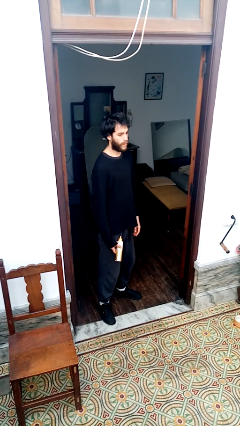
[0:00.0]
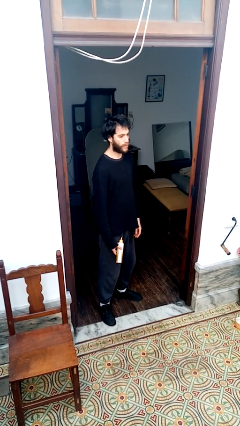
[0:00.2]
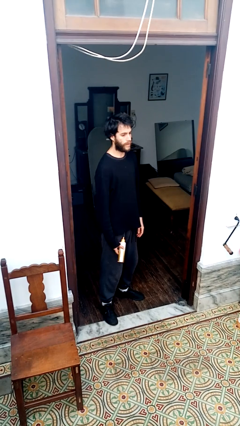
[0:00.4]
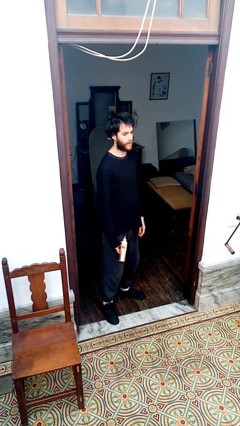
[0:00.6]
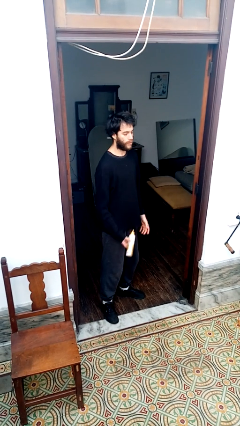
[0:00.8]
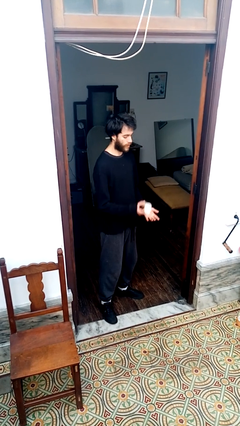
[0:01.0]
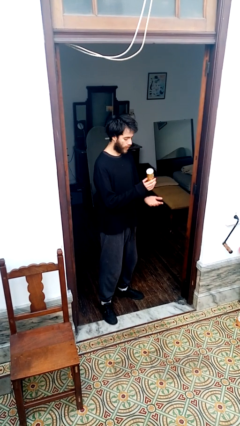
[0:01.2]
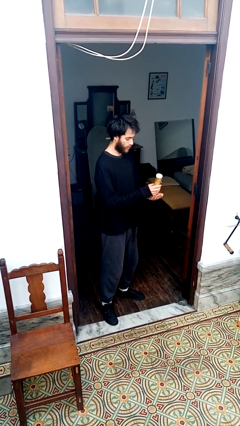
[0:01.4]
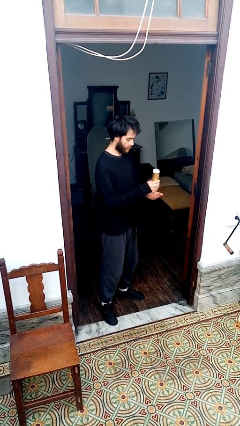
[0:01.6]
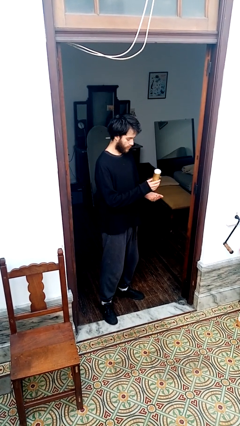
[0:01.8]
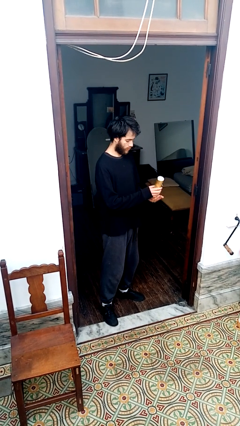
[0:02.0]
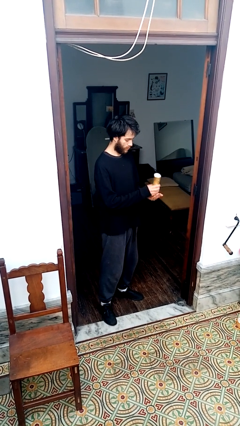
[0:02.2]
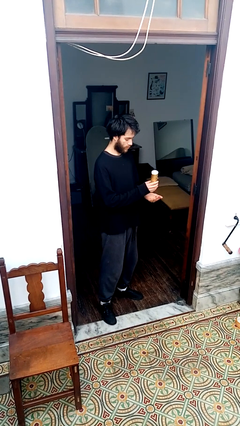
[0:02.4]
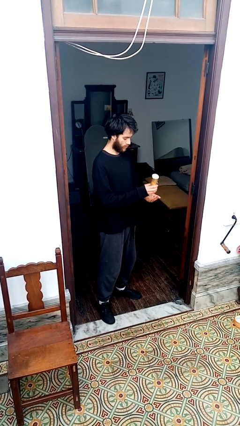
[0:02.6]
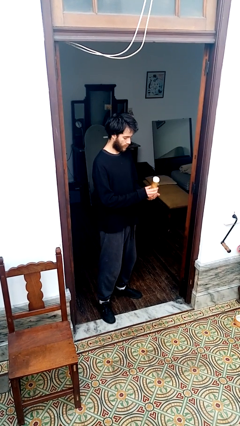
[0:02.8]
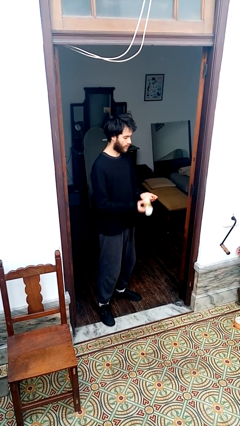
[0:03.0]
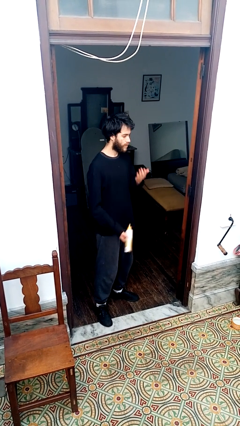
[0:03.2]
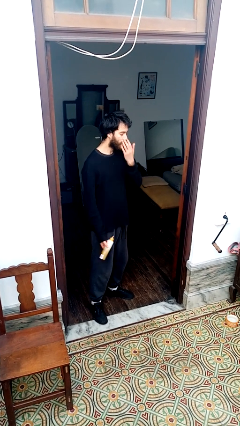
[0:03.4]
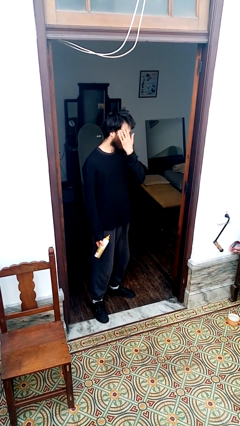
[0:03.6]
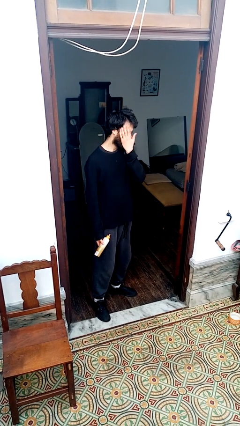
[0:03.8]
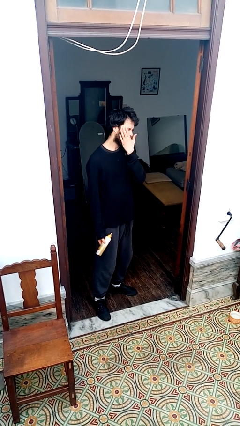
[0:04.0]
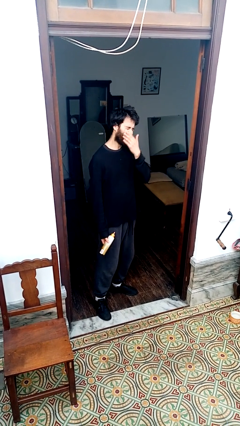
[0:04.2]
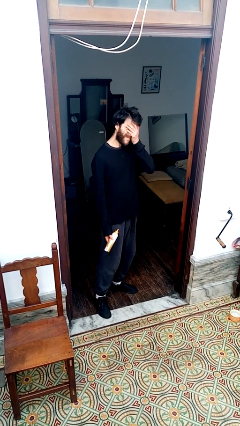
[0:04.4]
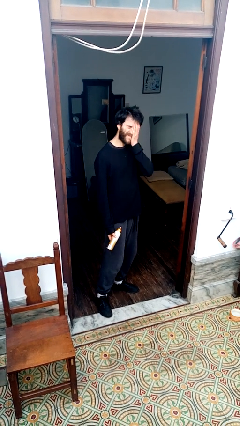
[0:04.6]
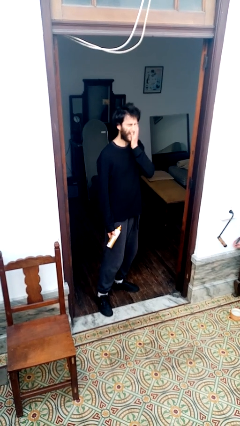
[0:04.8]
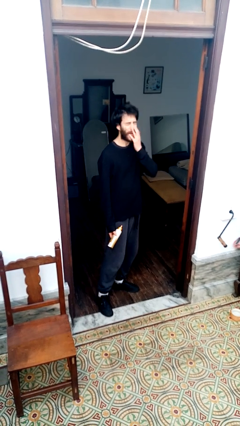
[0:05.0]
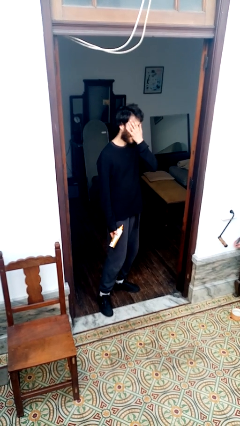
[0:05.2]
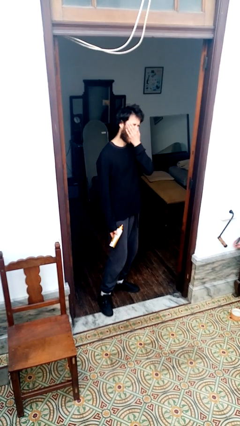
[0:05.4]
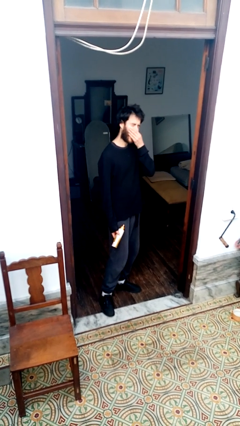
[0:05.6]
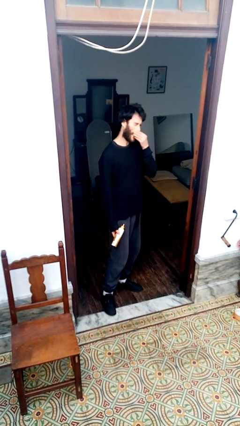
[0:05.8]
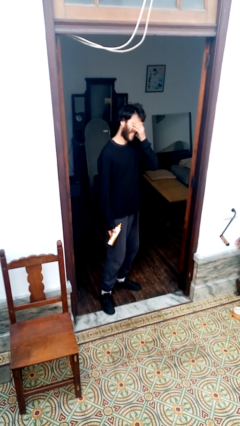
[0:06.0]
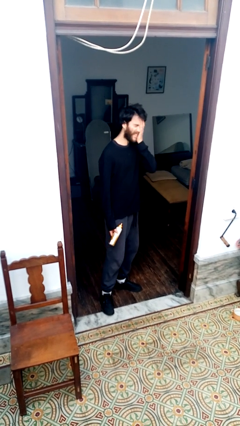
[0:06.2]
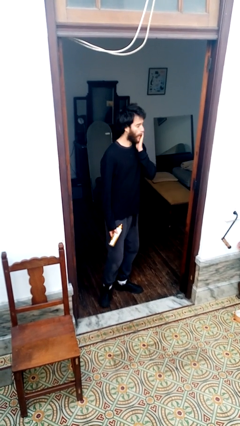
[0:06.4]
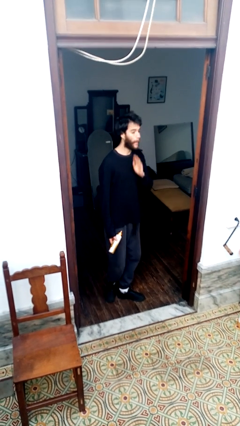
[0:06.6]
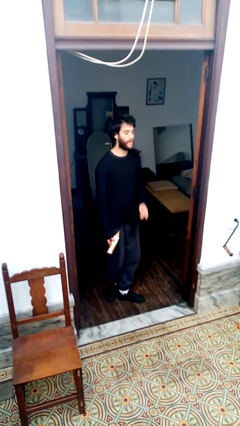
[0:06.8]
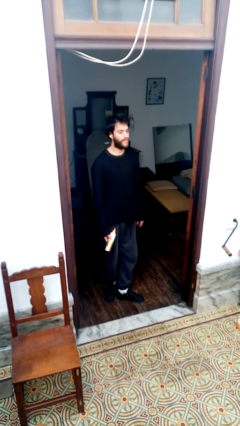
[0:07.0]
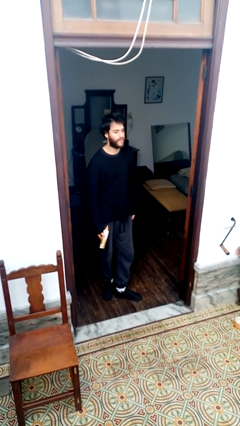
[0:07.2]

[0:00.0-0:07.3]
person applies facial moisturizer

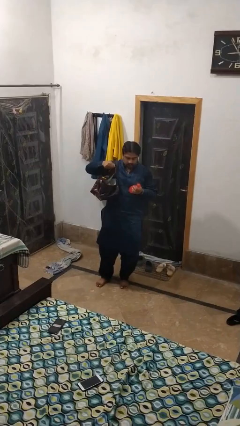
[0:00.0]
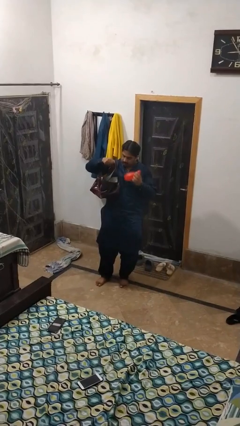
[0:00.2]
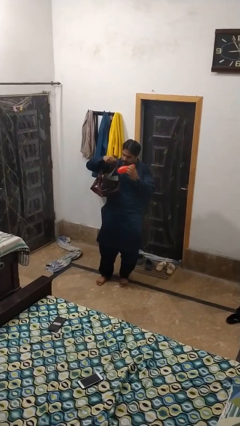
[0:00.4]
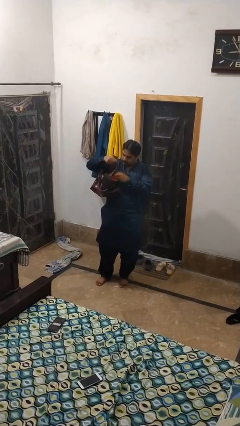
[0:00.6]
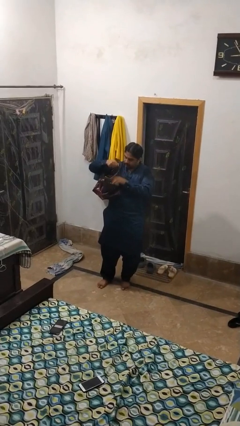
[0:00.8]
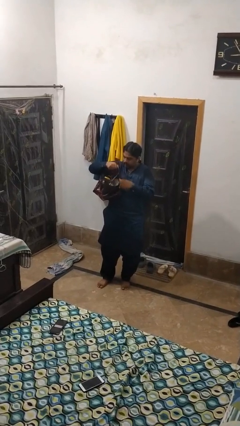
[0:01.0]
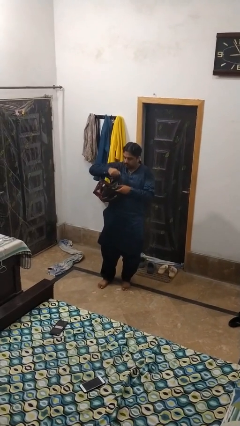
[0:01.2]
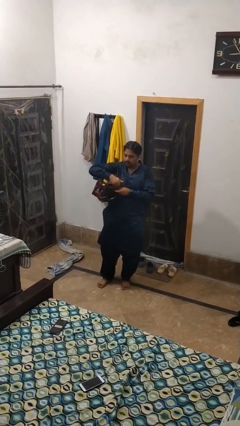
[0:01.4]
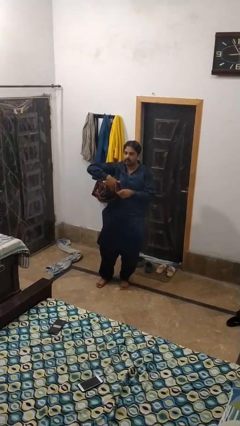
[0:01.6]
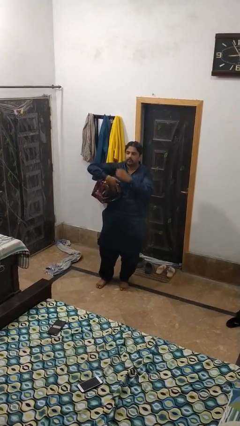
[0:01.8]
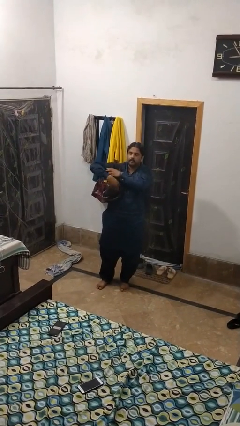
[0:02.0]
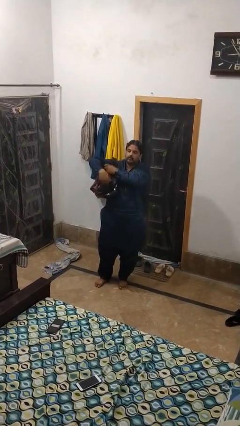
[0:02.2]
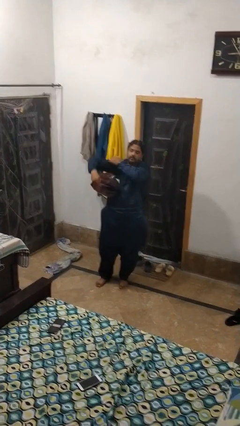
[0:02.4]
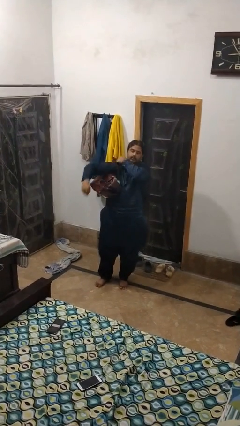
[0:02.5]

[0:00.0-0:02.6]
person puts object into purse

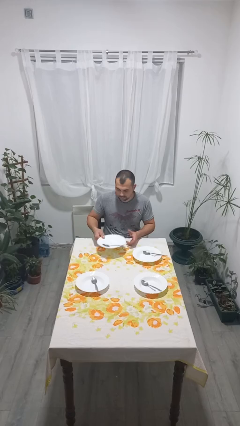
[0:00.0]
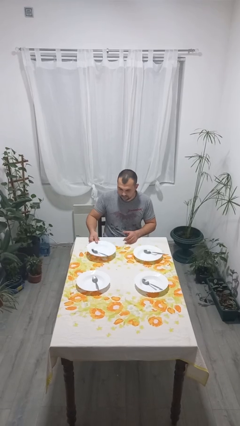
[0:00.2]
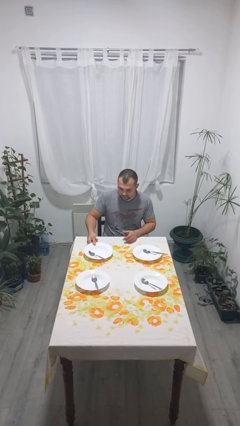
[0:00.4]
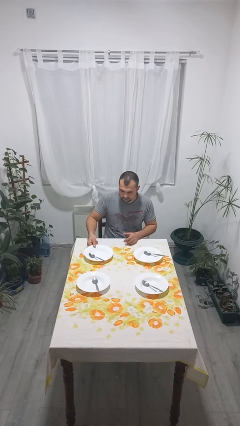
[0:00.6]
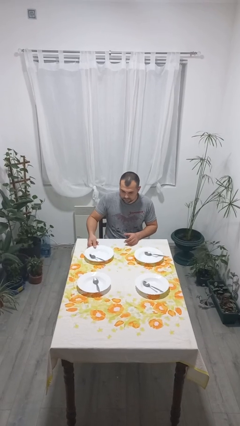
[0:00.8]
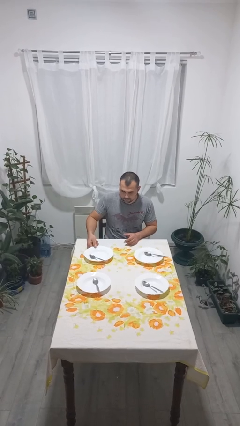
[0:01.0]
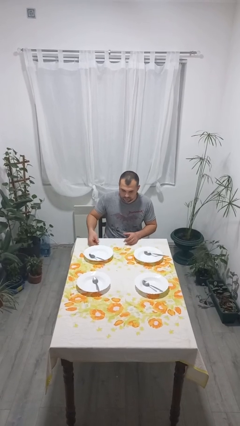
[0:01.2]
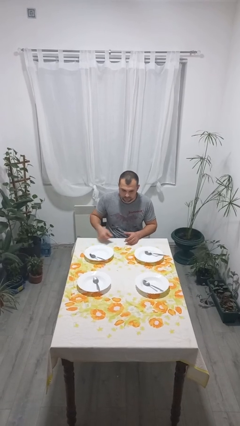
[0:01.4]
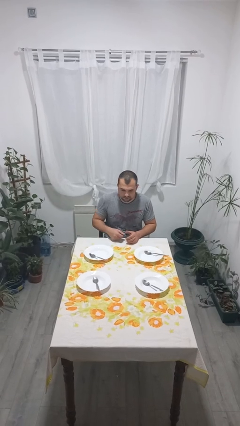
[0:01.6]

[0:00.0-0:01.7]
person sets table

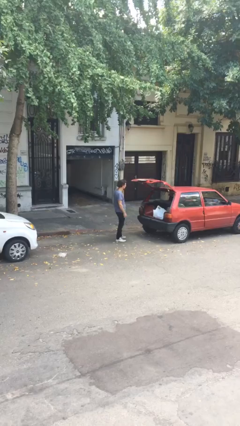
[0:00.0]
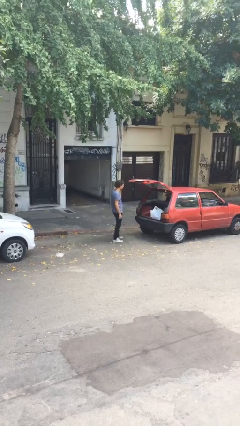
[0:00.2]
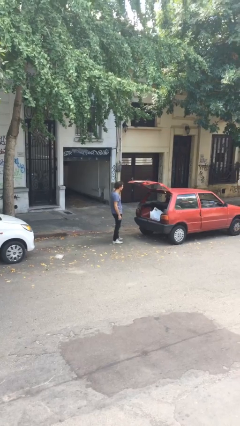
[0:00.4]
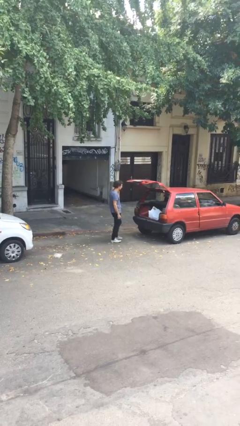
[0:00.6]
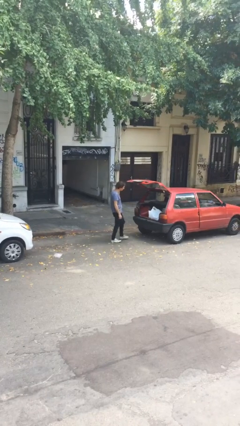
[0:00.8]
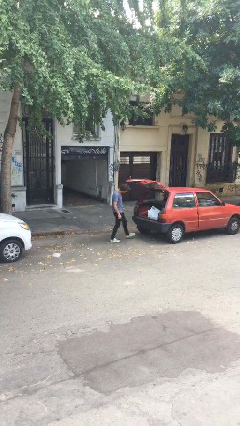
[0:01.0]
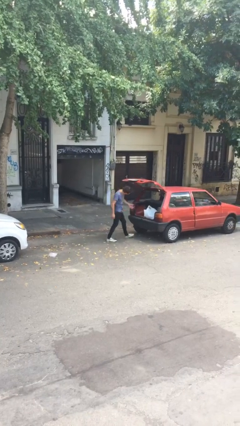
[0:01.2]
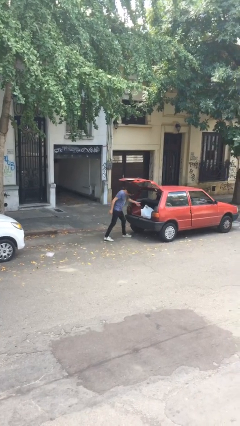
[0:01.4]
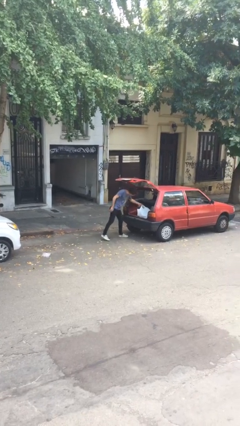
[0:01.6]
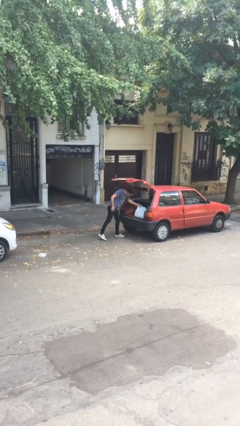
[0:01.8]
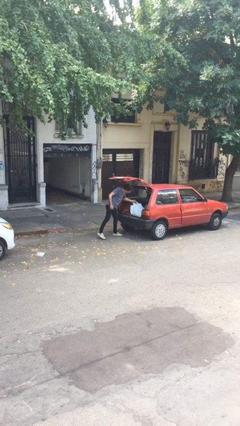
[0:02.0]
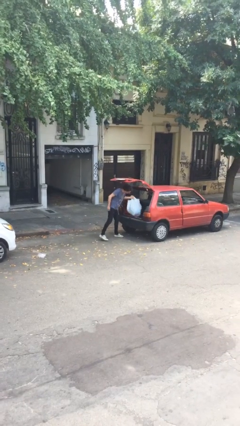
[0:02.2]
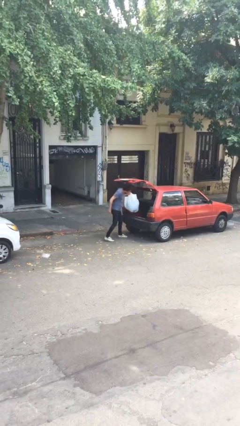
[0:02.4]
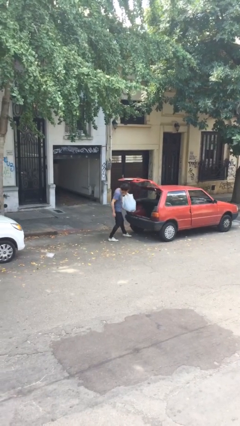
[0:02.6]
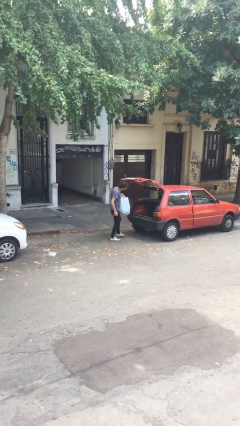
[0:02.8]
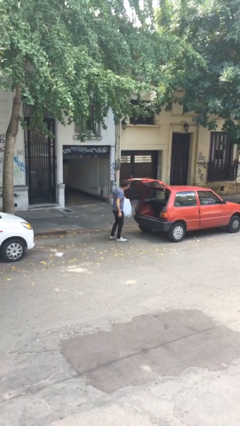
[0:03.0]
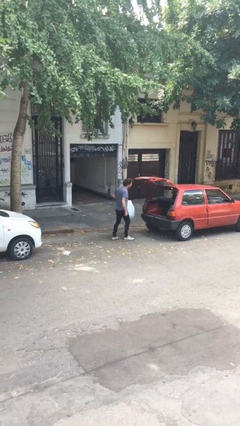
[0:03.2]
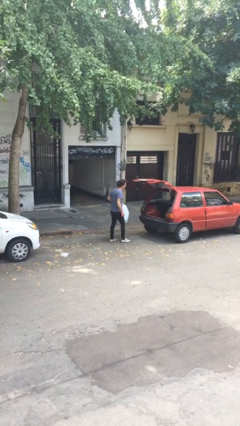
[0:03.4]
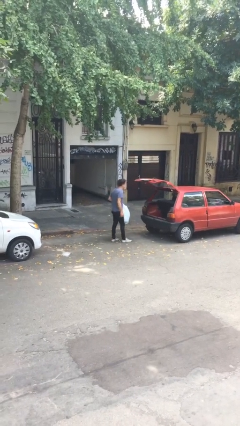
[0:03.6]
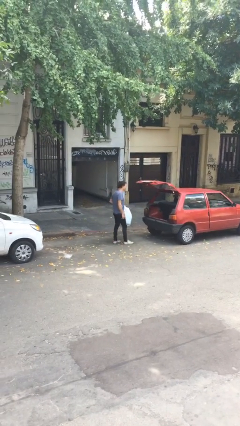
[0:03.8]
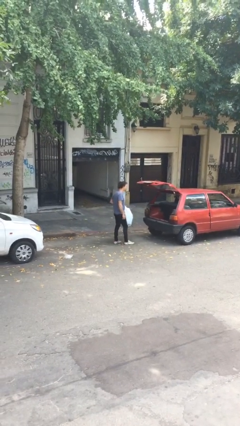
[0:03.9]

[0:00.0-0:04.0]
person unloads car

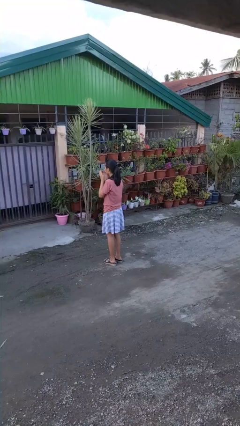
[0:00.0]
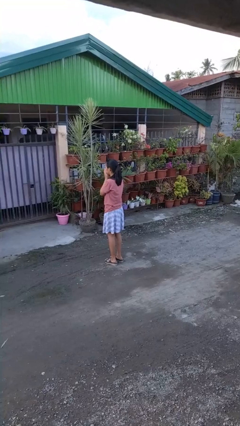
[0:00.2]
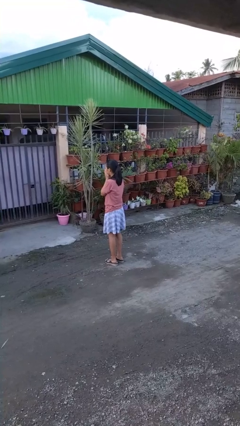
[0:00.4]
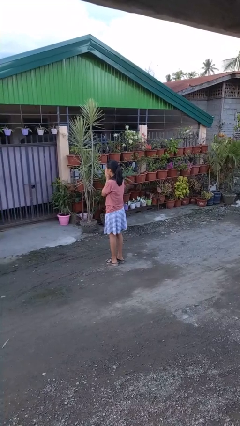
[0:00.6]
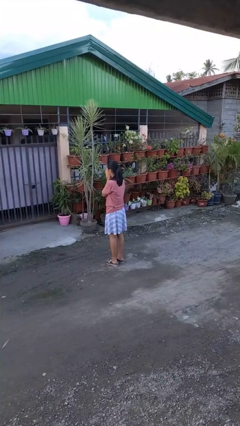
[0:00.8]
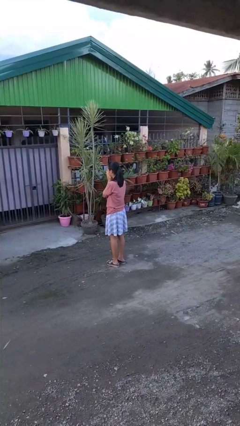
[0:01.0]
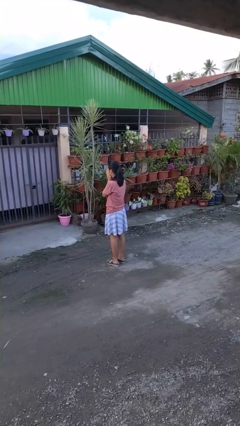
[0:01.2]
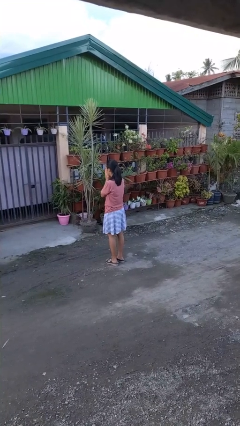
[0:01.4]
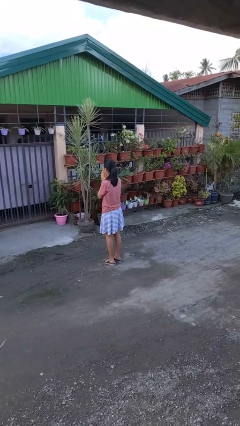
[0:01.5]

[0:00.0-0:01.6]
person blows into hands

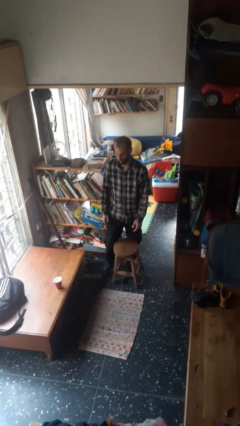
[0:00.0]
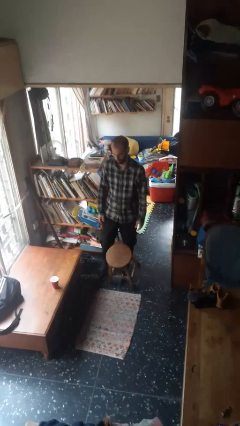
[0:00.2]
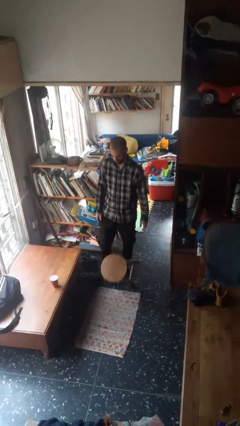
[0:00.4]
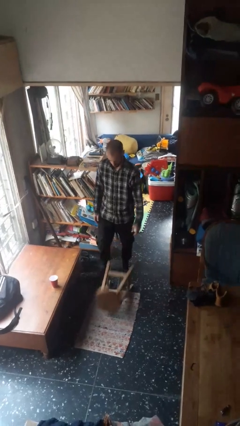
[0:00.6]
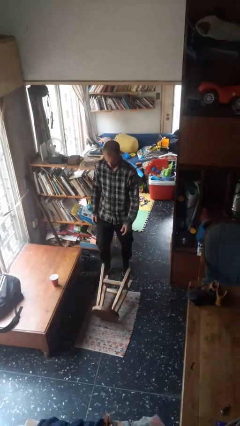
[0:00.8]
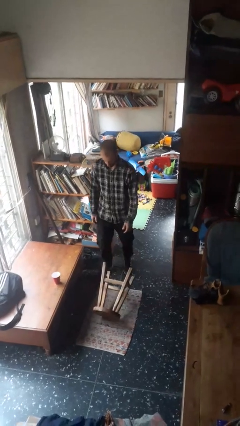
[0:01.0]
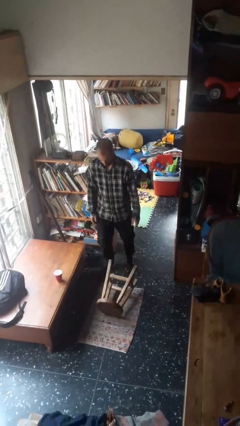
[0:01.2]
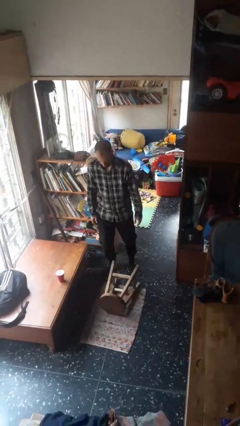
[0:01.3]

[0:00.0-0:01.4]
person knocks over furniture
